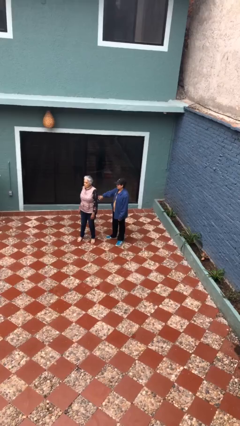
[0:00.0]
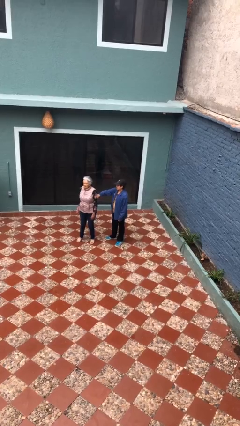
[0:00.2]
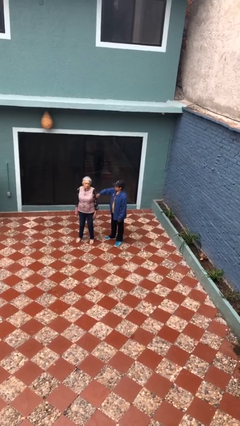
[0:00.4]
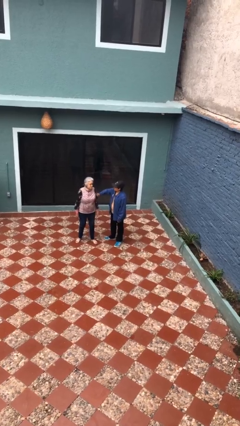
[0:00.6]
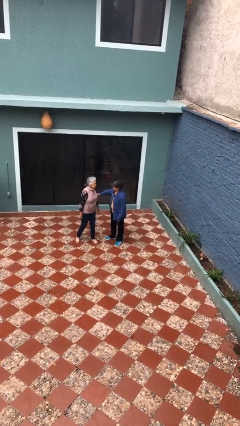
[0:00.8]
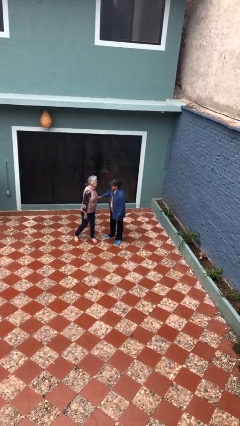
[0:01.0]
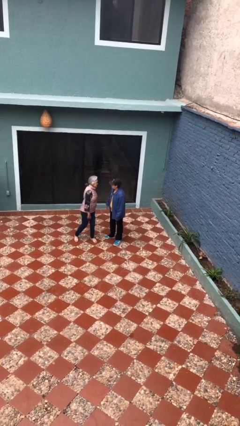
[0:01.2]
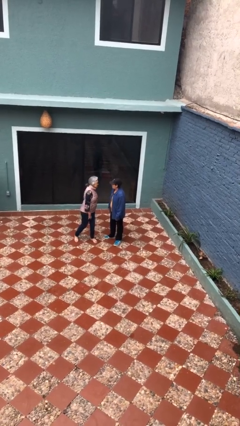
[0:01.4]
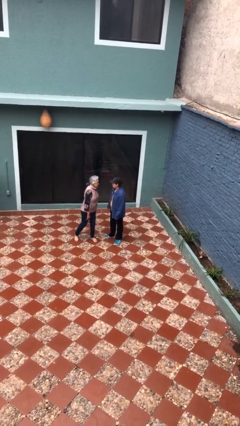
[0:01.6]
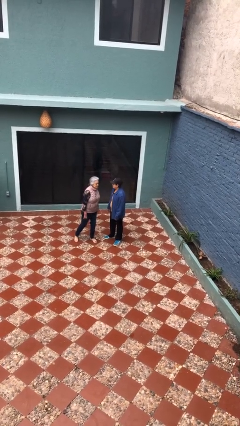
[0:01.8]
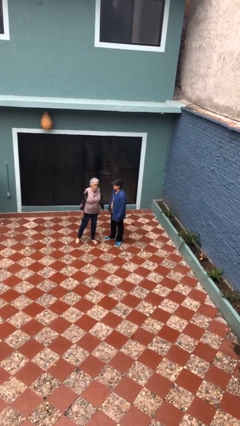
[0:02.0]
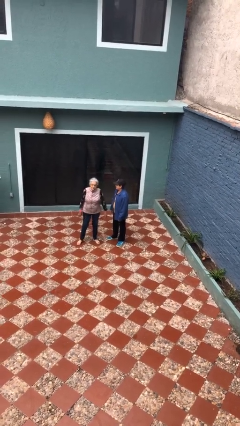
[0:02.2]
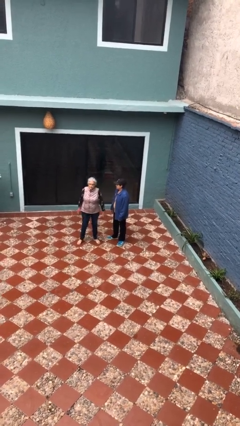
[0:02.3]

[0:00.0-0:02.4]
person grabs person by bicep

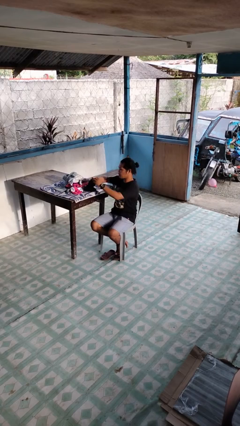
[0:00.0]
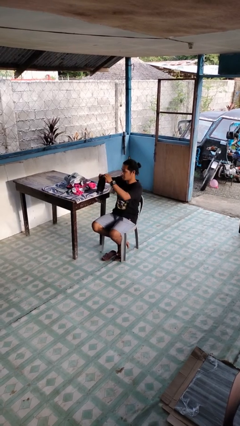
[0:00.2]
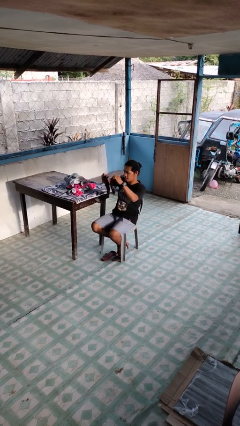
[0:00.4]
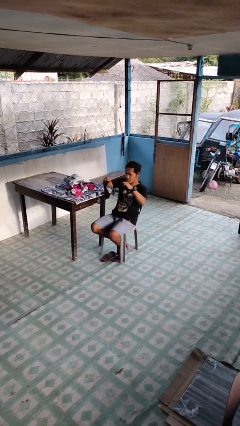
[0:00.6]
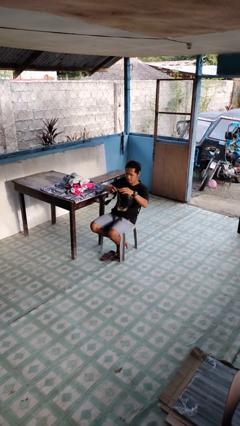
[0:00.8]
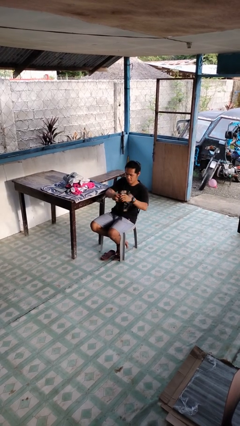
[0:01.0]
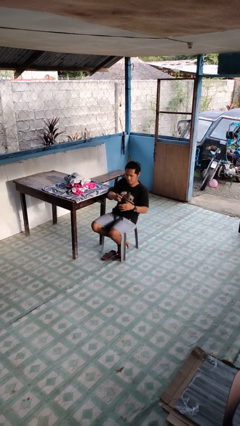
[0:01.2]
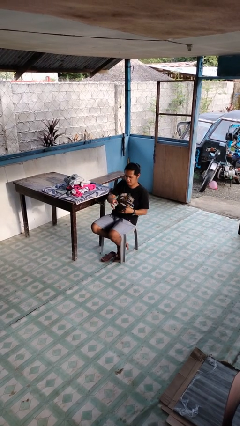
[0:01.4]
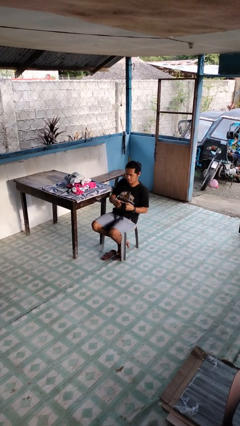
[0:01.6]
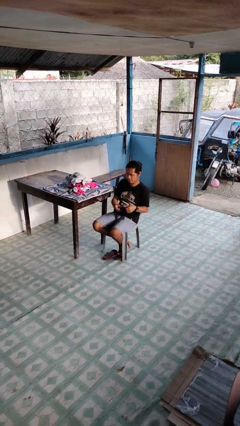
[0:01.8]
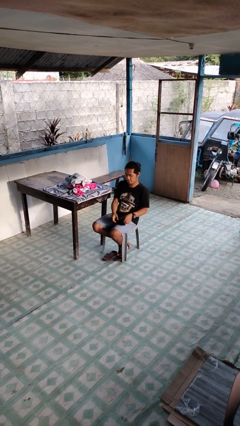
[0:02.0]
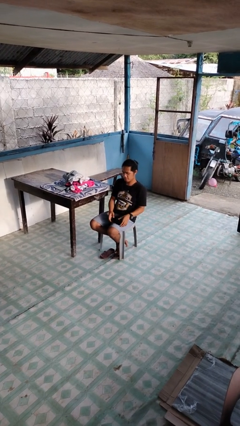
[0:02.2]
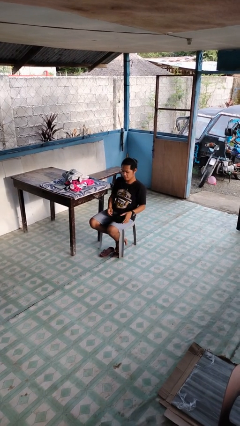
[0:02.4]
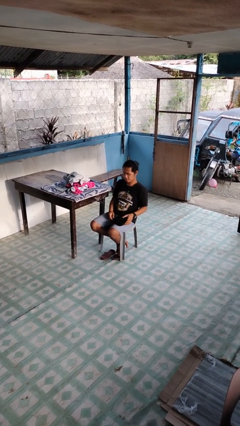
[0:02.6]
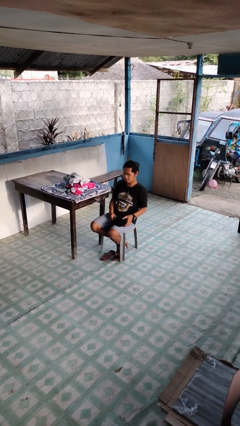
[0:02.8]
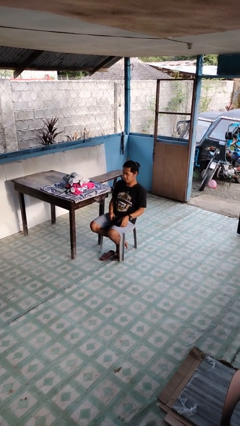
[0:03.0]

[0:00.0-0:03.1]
person folds socks

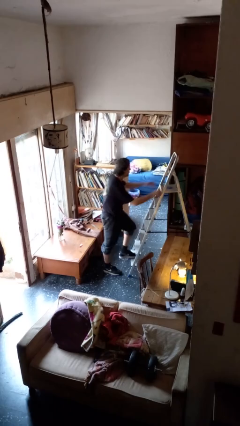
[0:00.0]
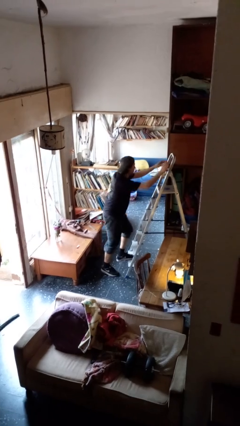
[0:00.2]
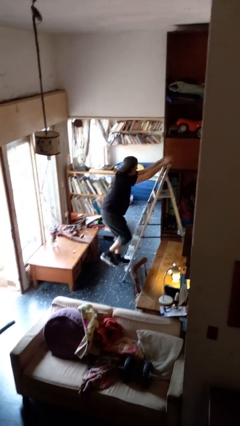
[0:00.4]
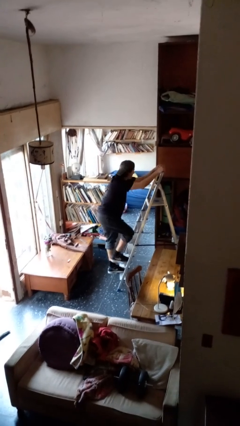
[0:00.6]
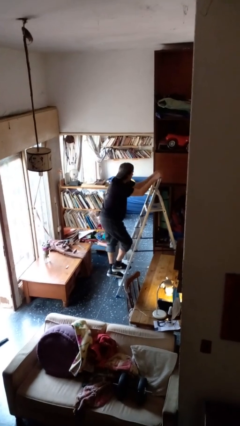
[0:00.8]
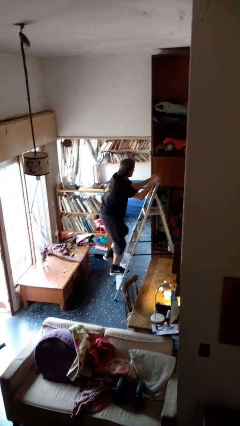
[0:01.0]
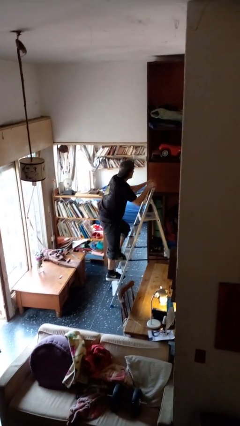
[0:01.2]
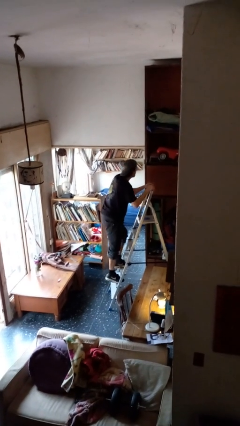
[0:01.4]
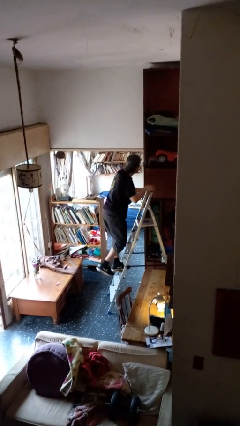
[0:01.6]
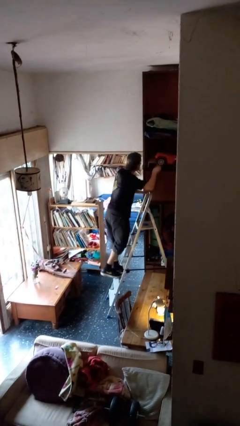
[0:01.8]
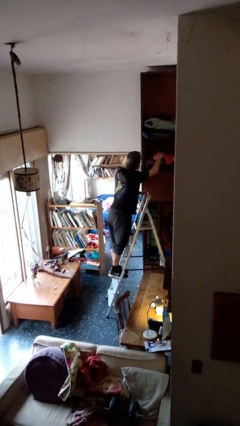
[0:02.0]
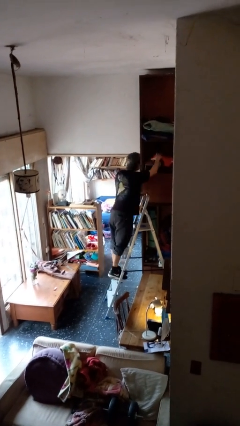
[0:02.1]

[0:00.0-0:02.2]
person climbs up ladder

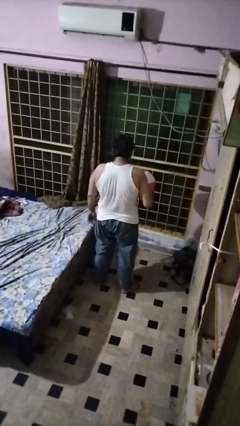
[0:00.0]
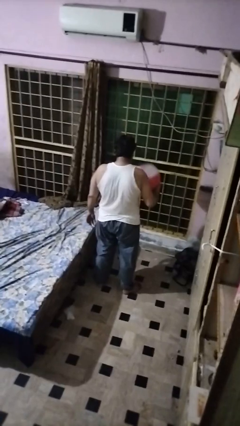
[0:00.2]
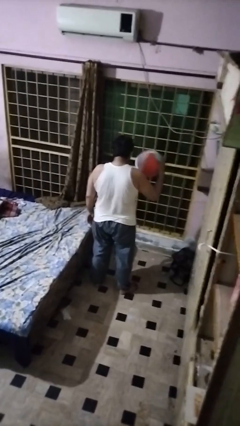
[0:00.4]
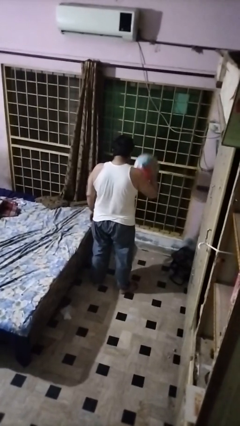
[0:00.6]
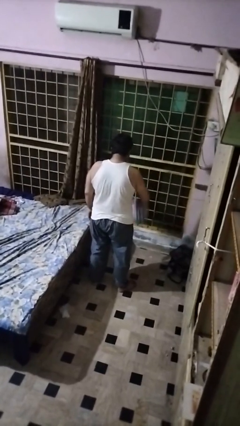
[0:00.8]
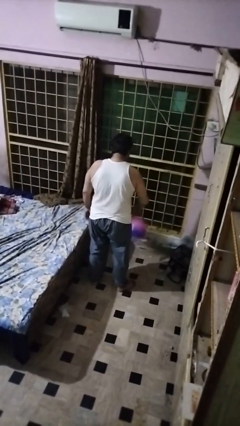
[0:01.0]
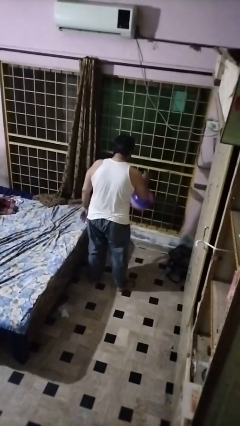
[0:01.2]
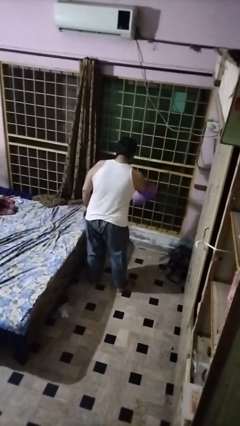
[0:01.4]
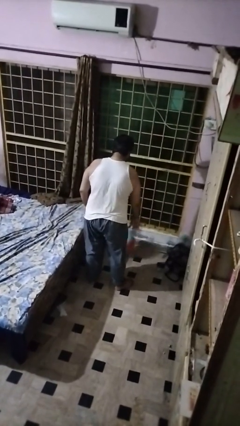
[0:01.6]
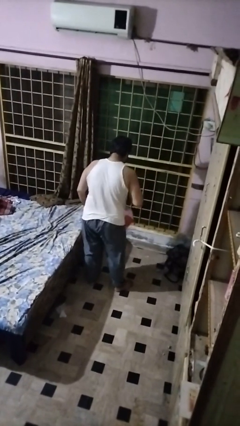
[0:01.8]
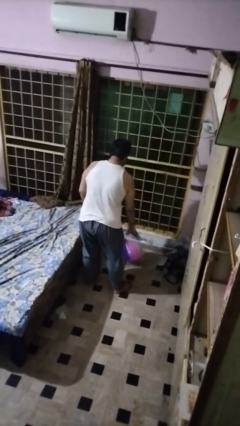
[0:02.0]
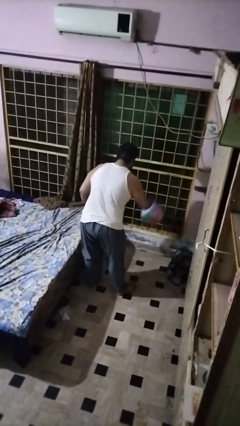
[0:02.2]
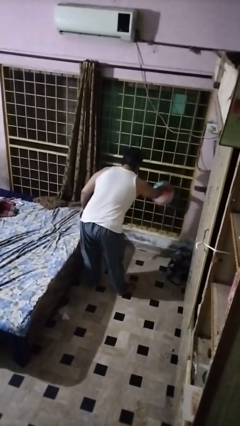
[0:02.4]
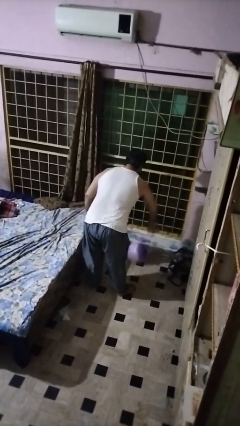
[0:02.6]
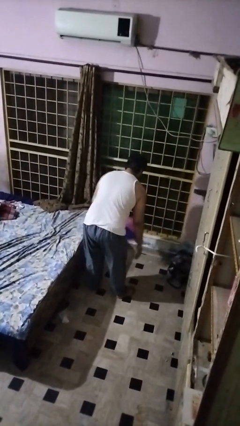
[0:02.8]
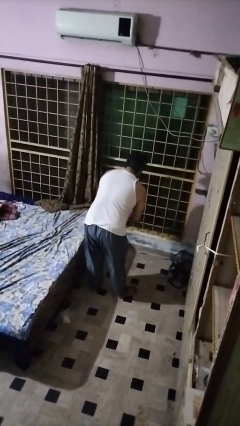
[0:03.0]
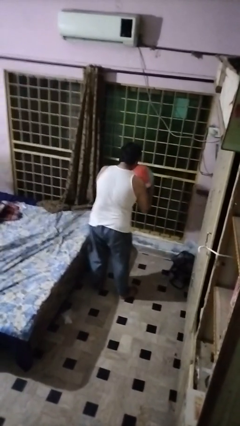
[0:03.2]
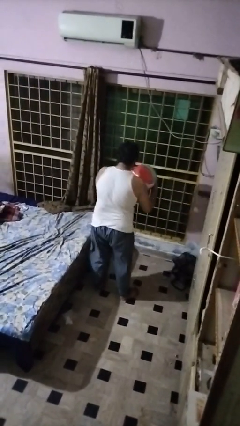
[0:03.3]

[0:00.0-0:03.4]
person bounces ball on floor

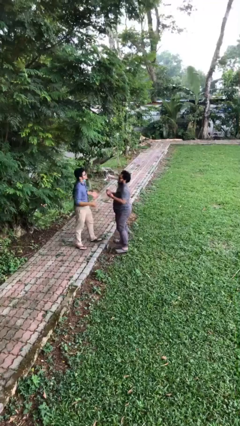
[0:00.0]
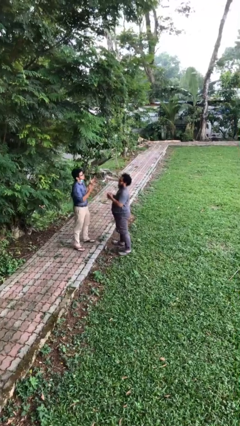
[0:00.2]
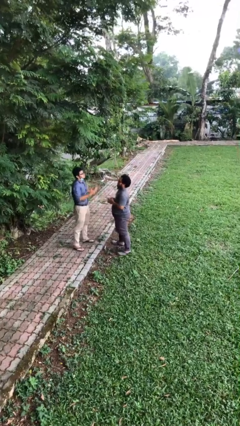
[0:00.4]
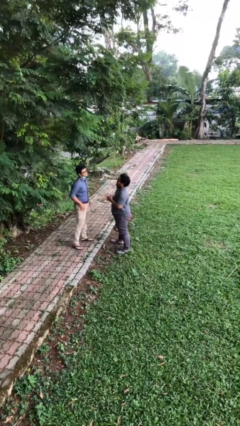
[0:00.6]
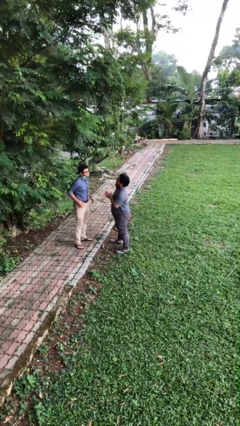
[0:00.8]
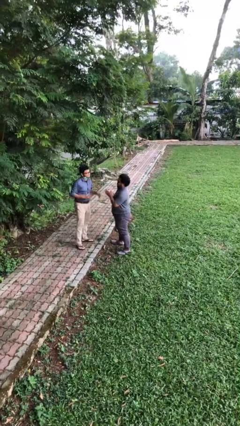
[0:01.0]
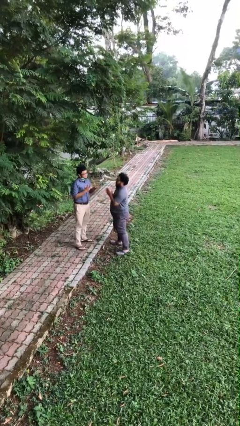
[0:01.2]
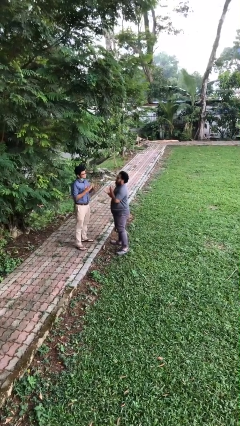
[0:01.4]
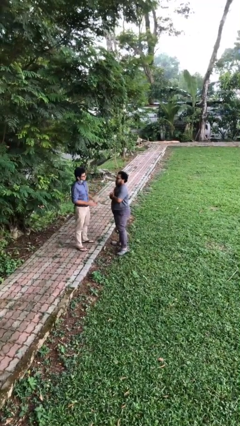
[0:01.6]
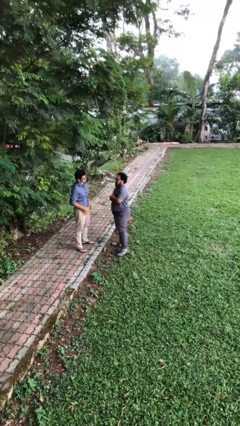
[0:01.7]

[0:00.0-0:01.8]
person talks to person

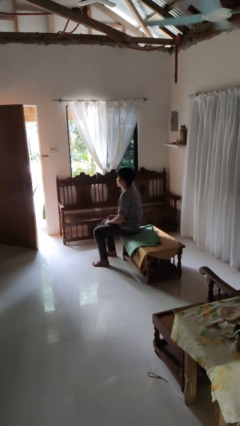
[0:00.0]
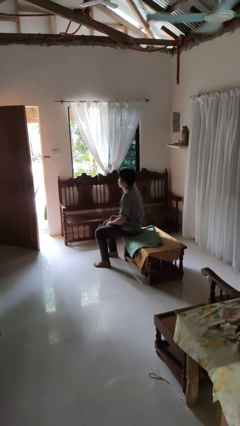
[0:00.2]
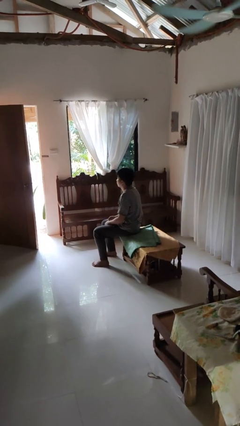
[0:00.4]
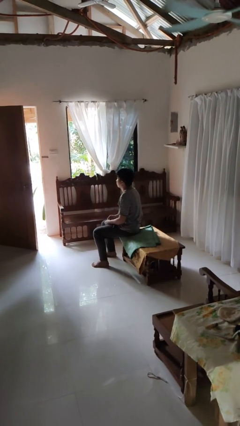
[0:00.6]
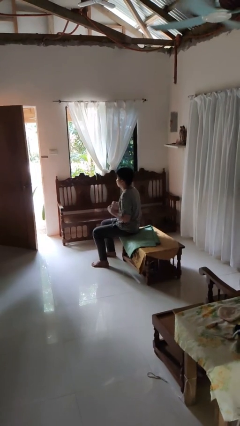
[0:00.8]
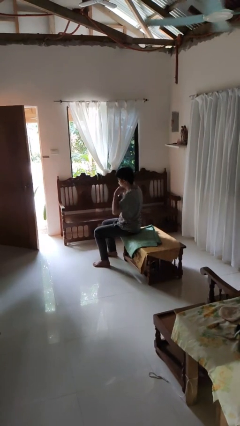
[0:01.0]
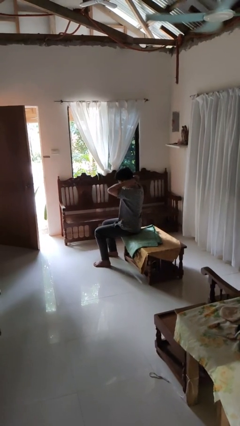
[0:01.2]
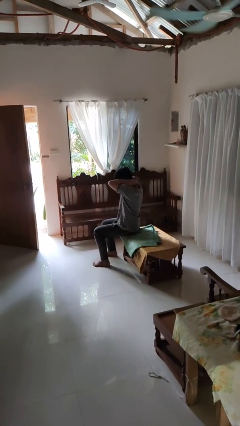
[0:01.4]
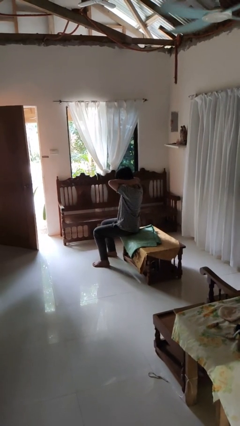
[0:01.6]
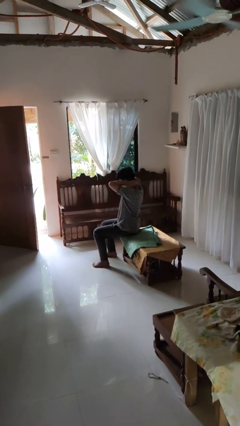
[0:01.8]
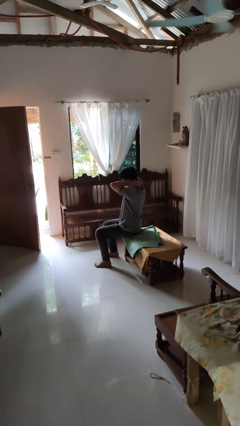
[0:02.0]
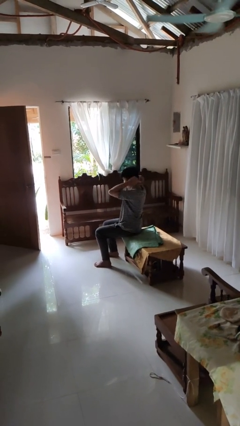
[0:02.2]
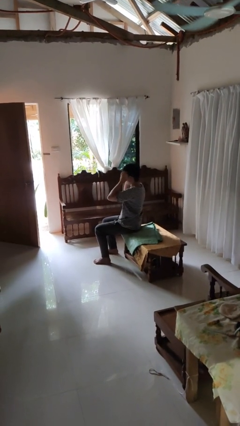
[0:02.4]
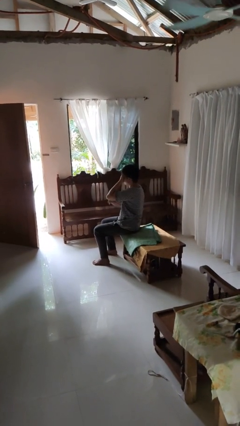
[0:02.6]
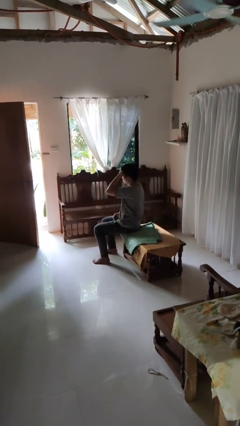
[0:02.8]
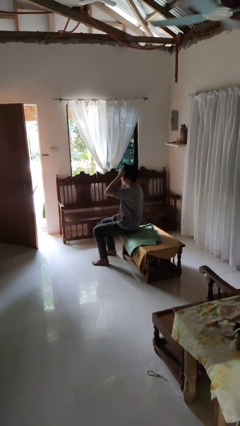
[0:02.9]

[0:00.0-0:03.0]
person puts on necklace

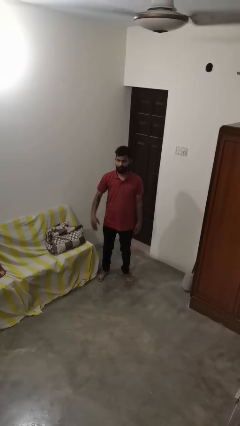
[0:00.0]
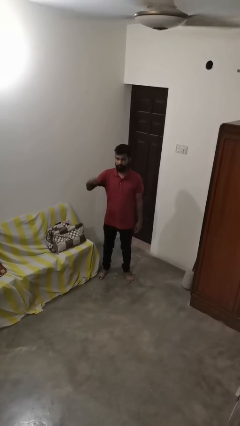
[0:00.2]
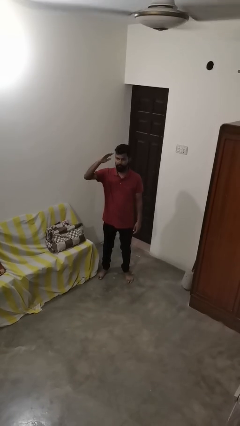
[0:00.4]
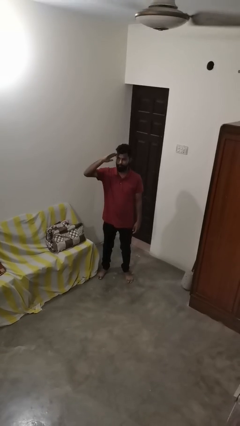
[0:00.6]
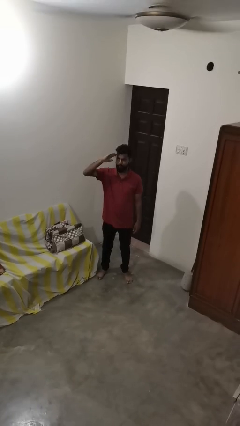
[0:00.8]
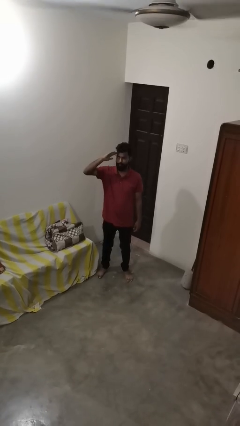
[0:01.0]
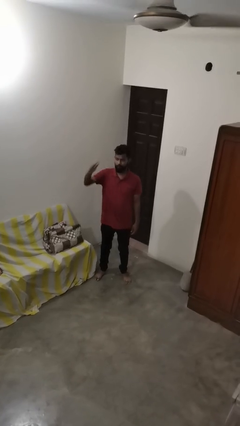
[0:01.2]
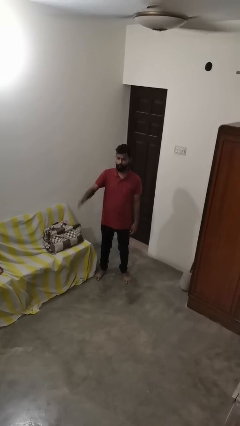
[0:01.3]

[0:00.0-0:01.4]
person salutes
